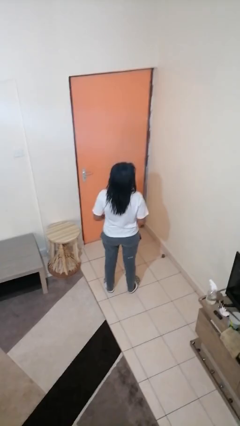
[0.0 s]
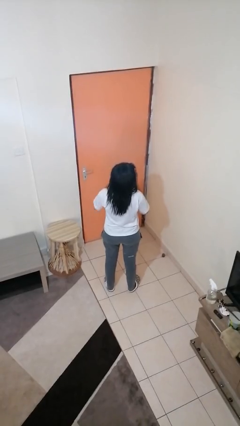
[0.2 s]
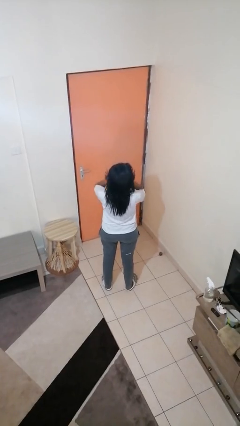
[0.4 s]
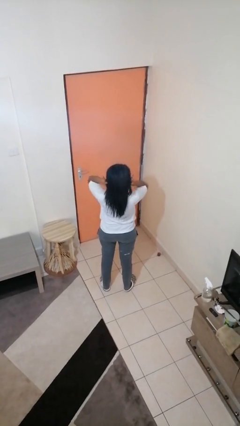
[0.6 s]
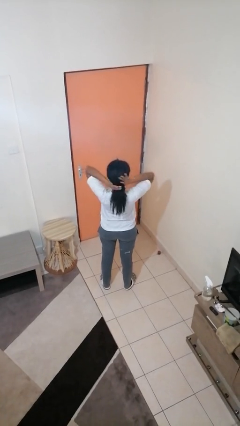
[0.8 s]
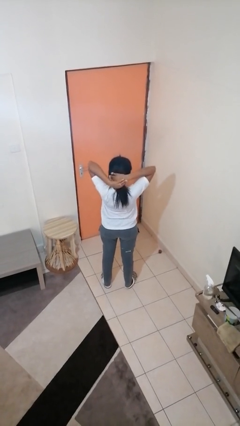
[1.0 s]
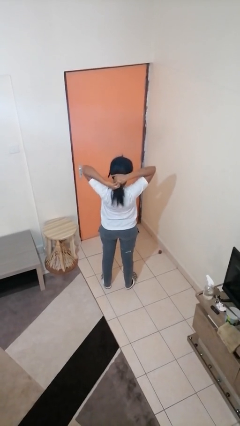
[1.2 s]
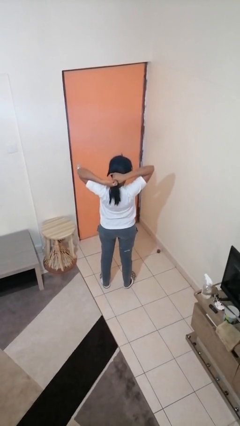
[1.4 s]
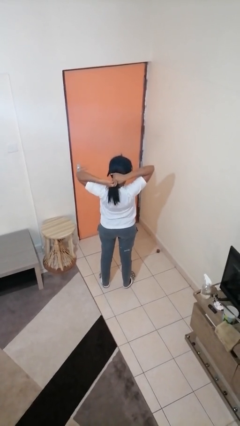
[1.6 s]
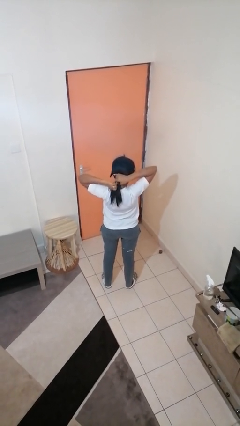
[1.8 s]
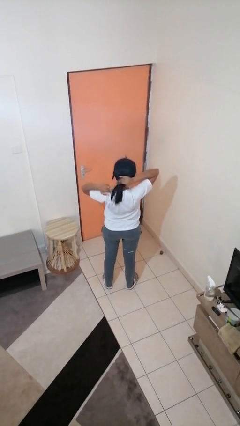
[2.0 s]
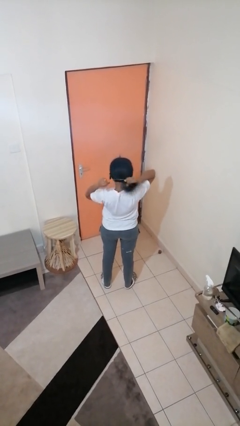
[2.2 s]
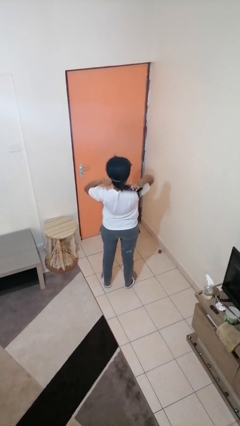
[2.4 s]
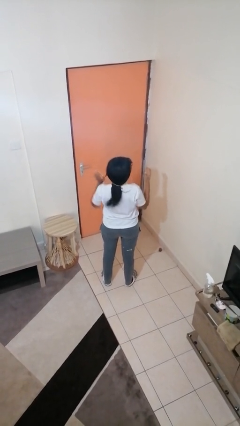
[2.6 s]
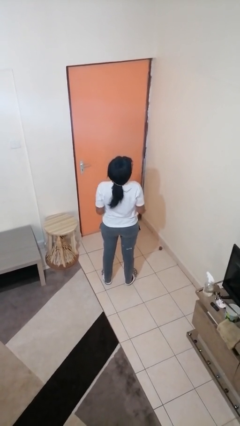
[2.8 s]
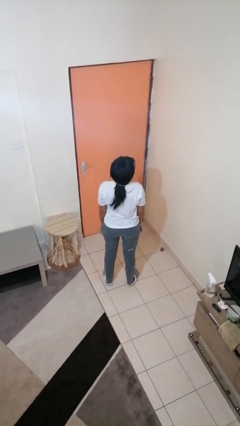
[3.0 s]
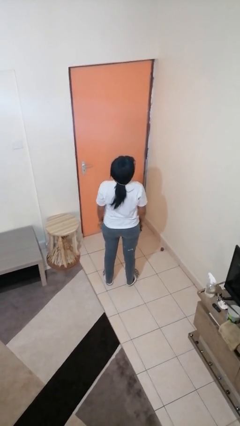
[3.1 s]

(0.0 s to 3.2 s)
person puts hair in ponytail

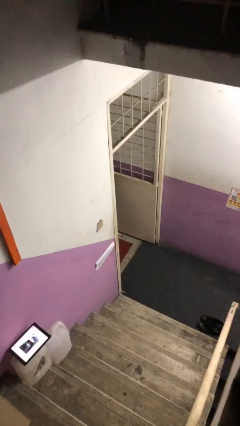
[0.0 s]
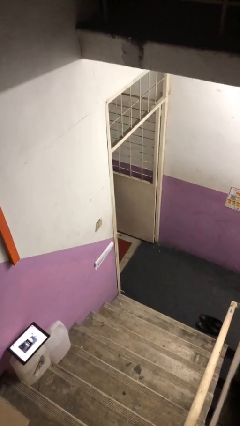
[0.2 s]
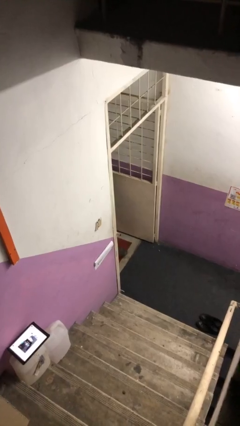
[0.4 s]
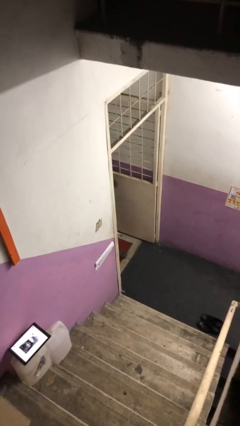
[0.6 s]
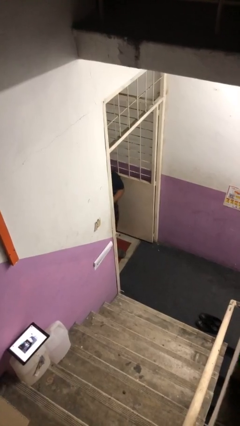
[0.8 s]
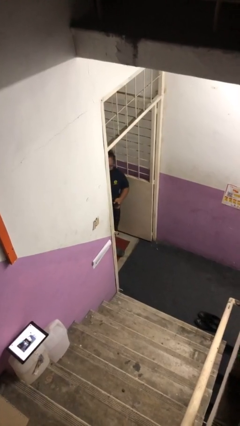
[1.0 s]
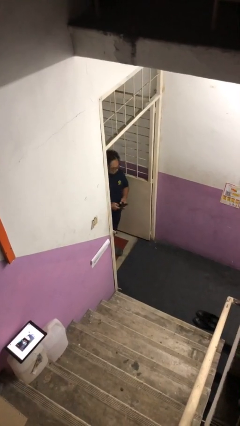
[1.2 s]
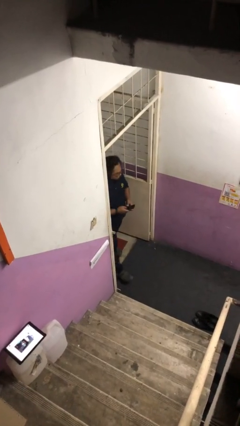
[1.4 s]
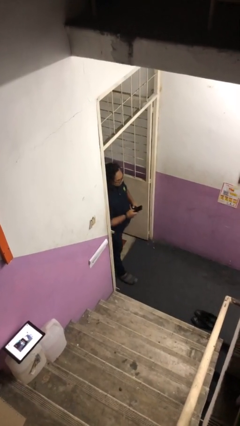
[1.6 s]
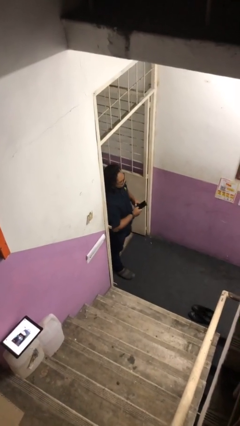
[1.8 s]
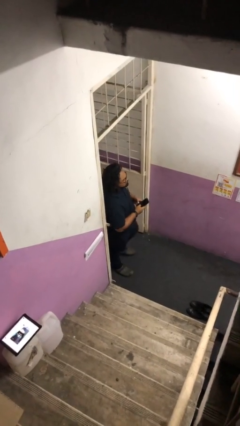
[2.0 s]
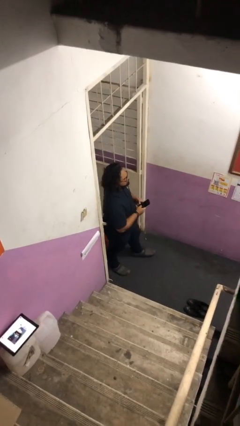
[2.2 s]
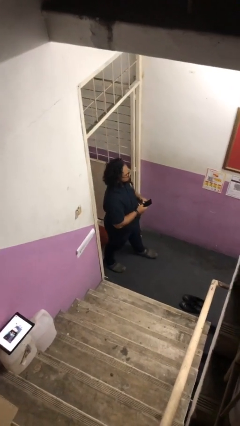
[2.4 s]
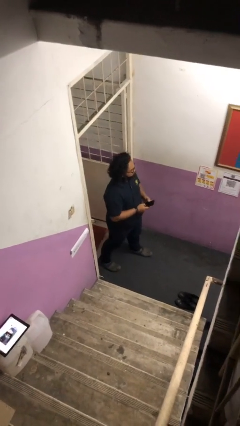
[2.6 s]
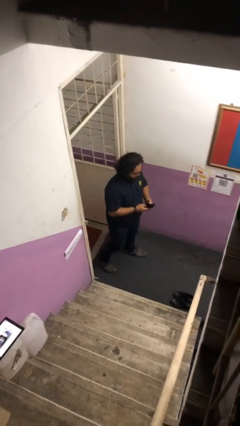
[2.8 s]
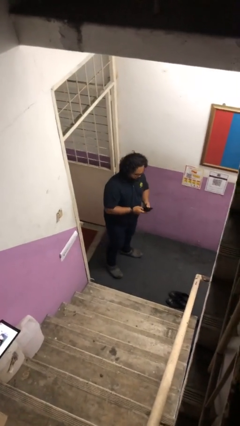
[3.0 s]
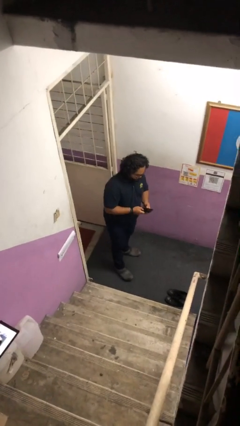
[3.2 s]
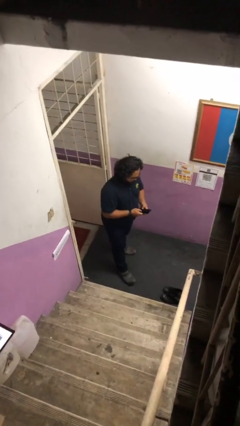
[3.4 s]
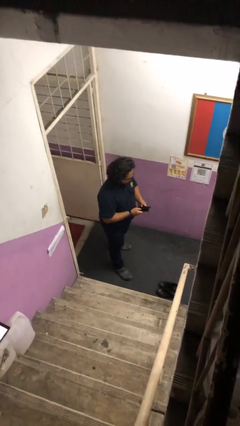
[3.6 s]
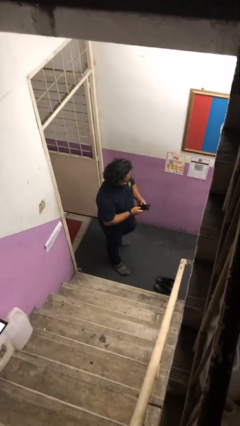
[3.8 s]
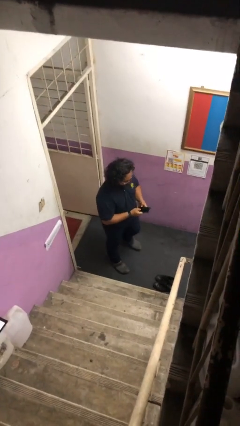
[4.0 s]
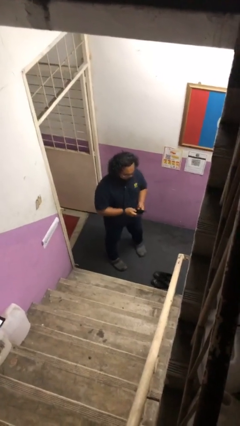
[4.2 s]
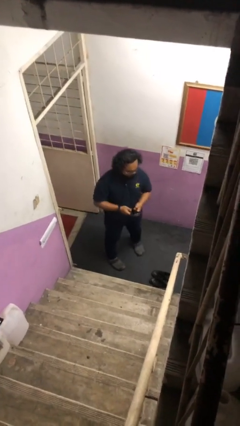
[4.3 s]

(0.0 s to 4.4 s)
person enters scene through structure

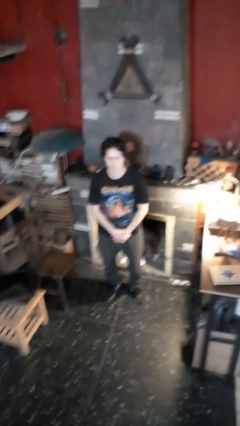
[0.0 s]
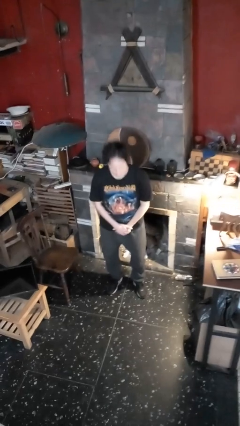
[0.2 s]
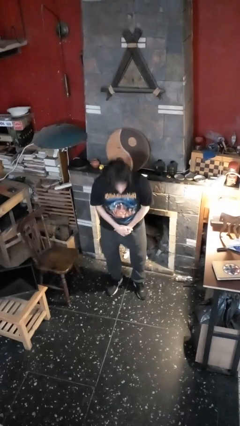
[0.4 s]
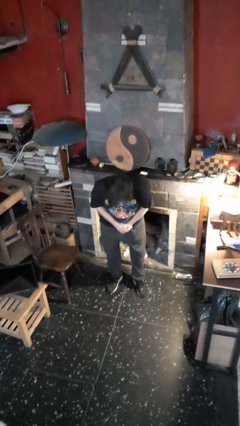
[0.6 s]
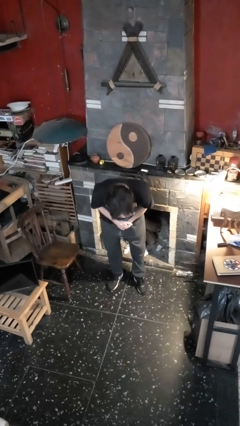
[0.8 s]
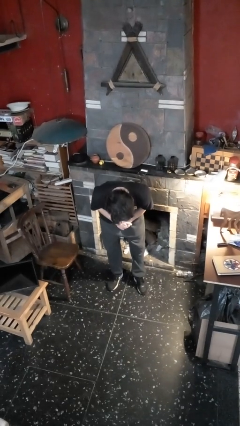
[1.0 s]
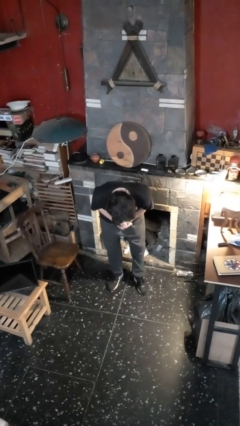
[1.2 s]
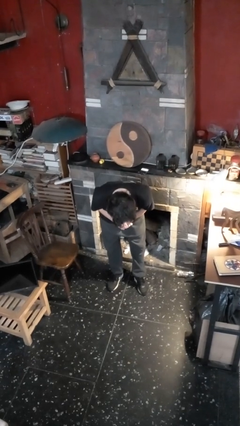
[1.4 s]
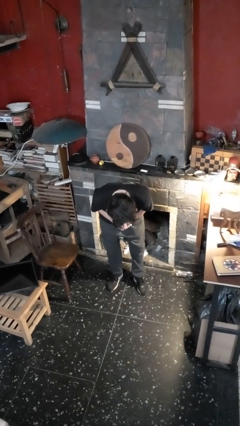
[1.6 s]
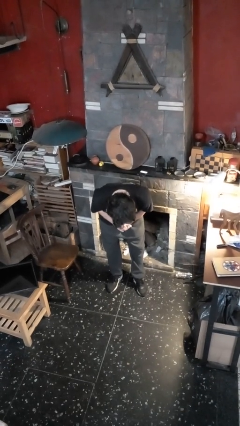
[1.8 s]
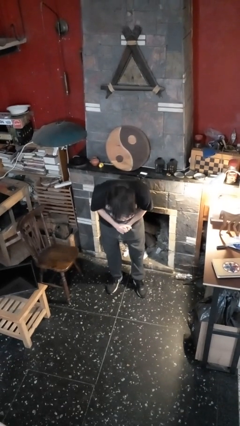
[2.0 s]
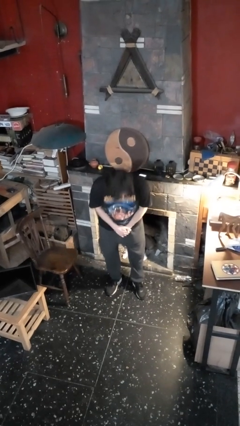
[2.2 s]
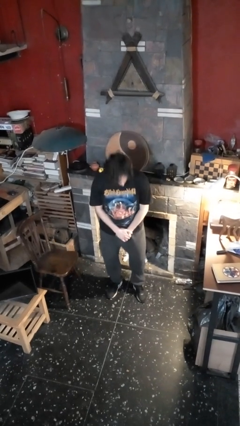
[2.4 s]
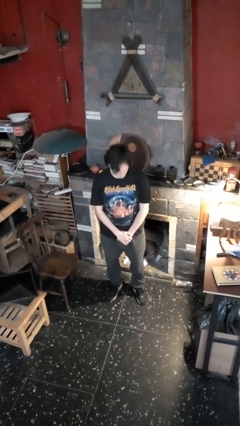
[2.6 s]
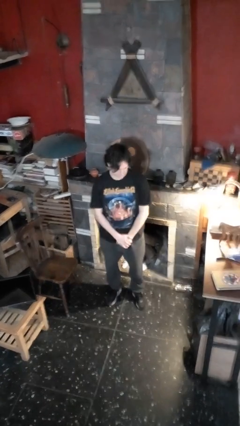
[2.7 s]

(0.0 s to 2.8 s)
person bows

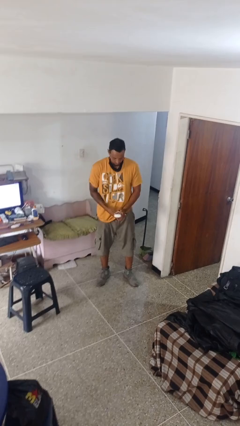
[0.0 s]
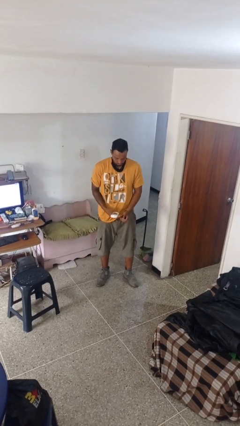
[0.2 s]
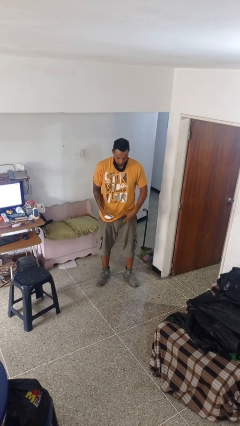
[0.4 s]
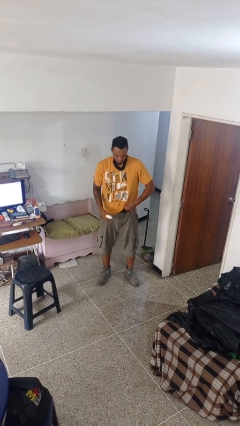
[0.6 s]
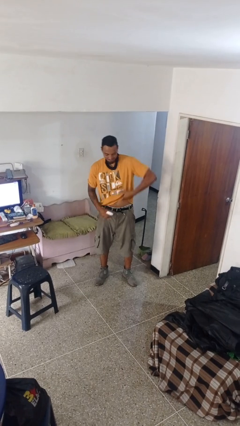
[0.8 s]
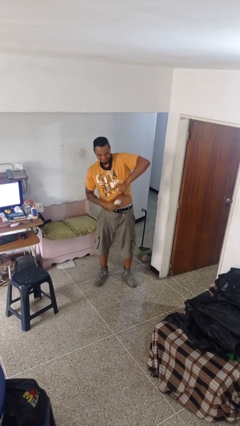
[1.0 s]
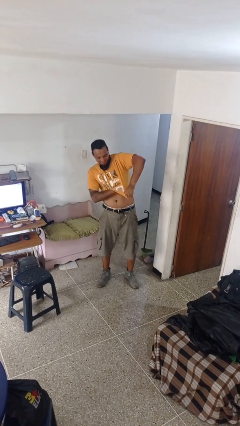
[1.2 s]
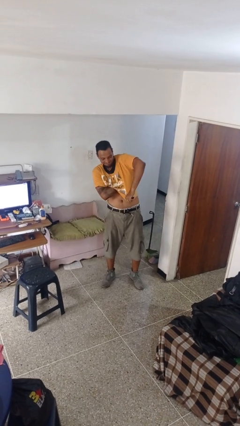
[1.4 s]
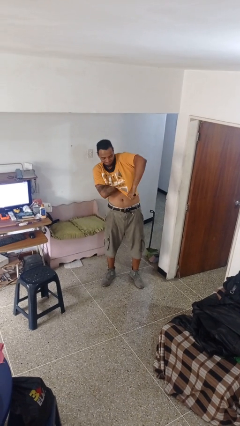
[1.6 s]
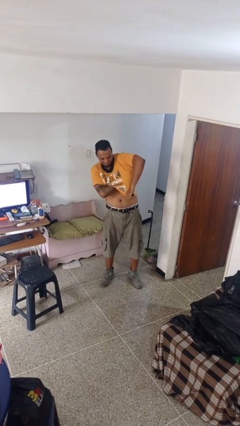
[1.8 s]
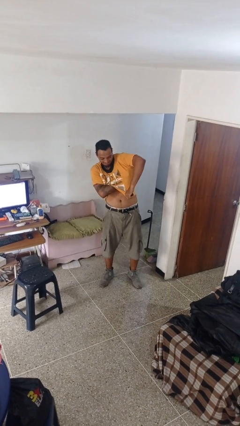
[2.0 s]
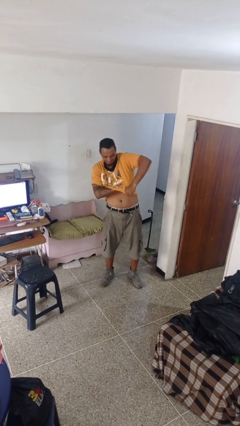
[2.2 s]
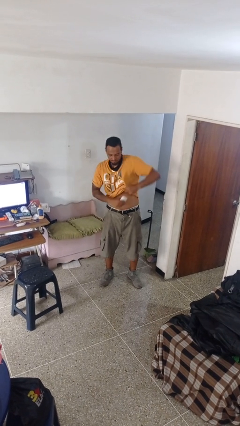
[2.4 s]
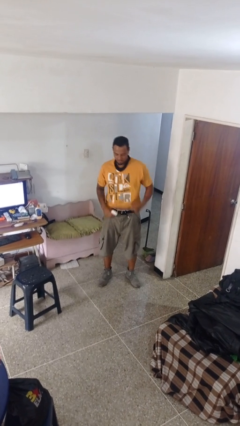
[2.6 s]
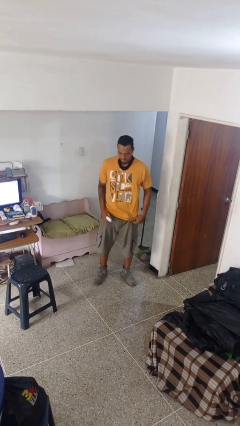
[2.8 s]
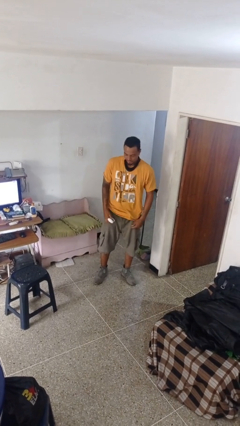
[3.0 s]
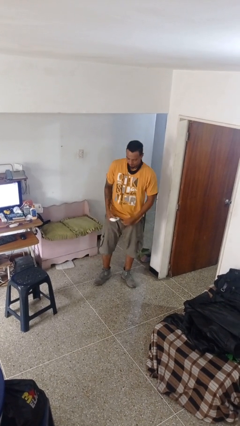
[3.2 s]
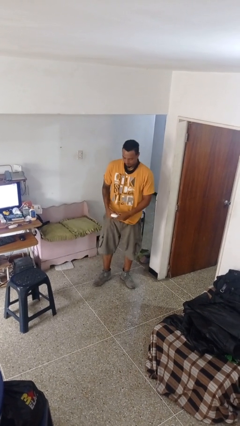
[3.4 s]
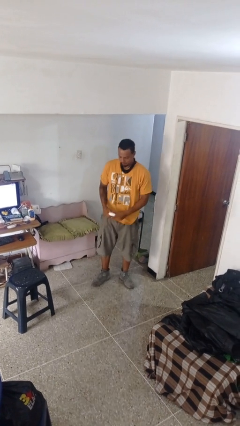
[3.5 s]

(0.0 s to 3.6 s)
person applies deodorant

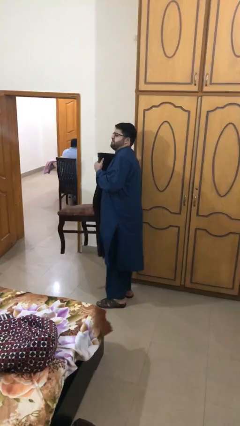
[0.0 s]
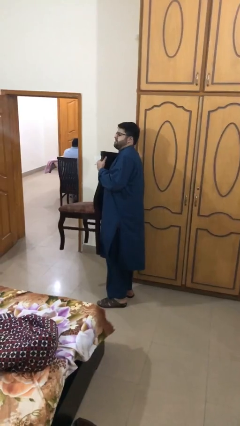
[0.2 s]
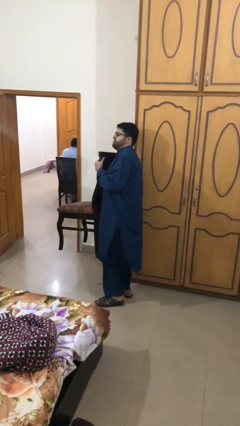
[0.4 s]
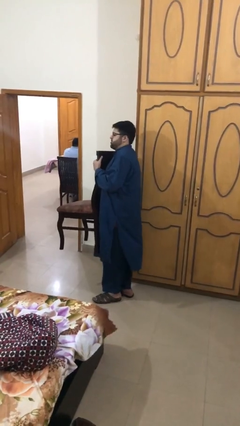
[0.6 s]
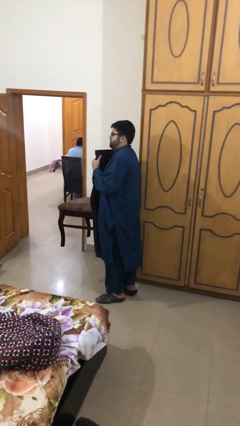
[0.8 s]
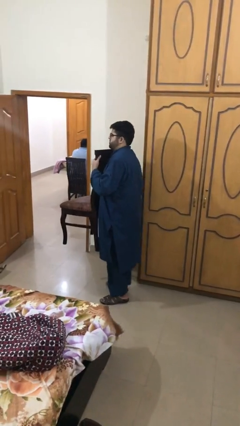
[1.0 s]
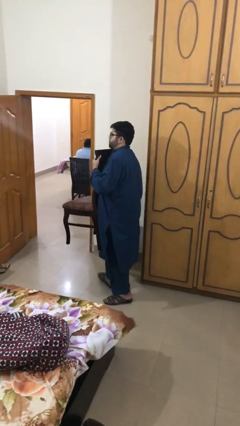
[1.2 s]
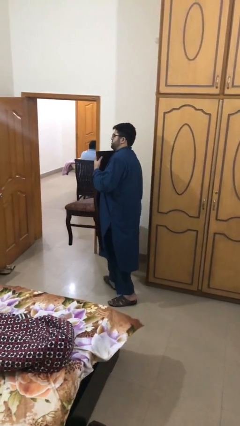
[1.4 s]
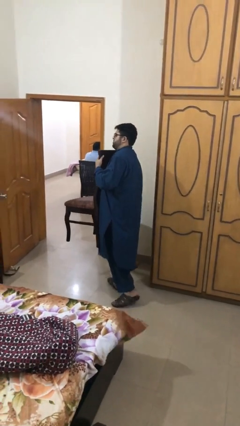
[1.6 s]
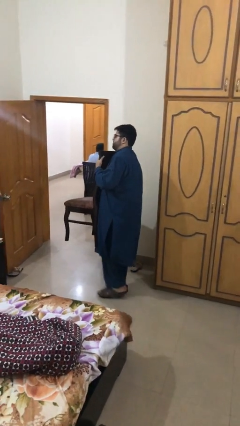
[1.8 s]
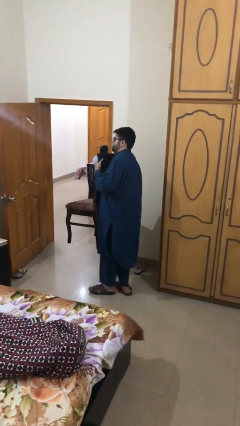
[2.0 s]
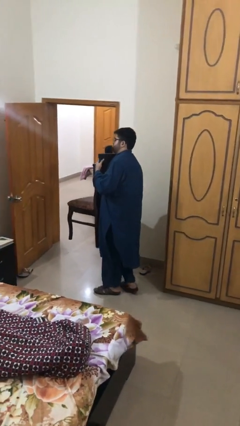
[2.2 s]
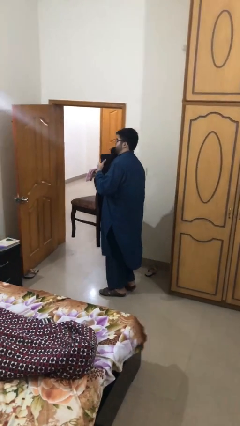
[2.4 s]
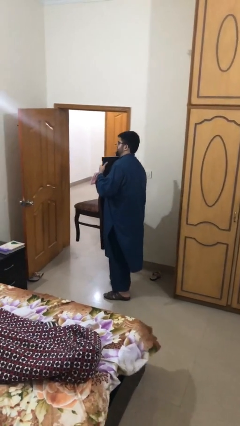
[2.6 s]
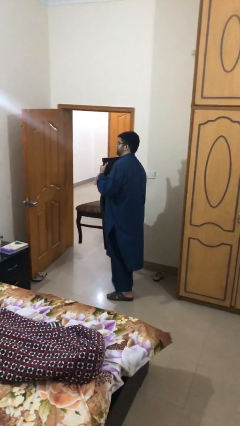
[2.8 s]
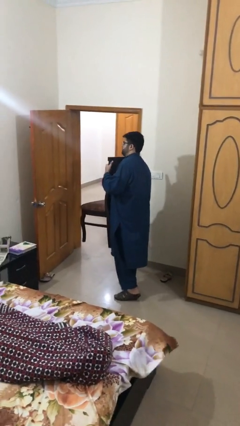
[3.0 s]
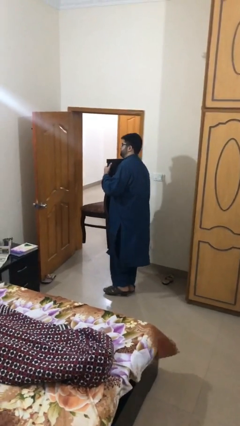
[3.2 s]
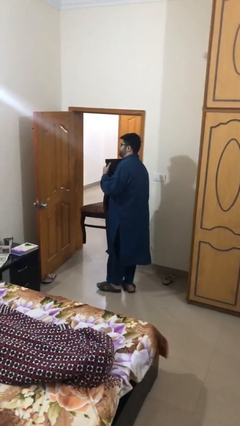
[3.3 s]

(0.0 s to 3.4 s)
person carries heavy object

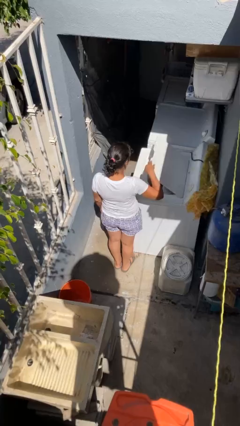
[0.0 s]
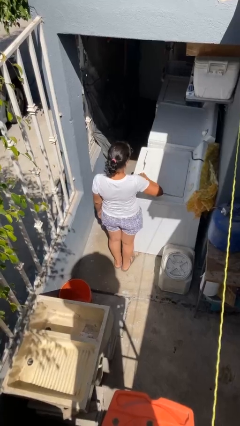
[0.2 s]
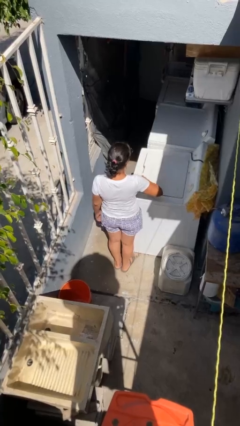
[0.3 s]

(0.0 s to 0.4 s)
person closes clothes washer
